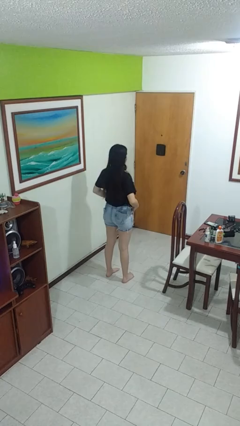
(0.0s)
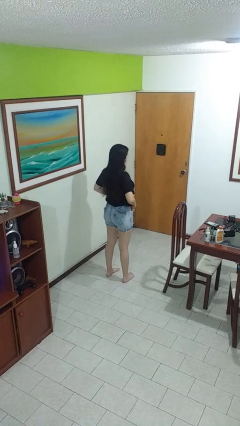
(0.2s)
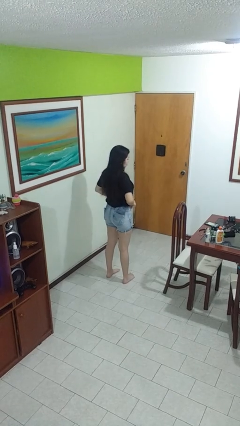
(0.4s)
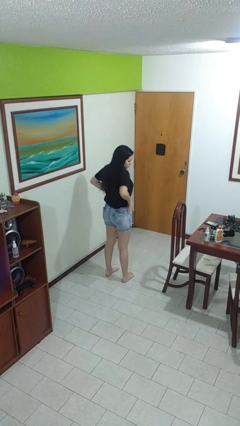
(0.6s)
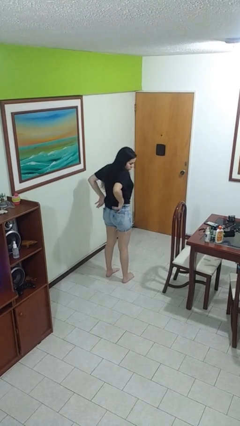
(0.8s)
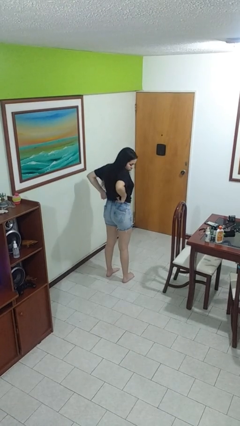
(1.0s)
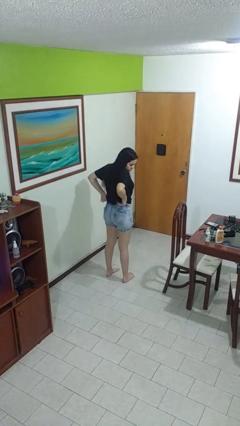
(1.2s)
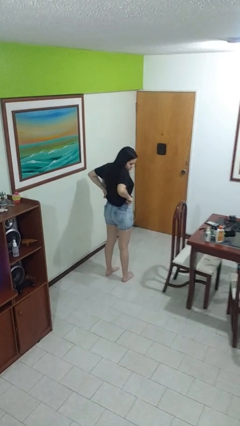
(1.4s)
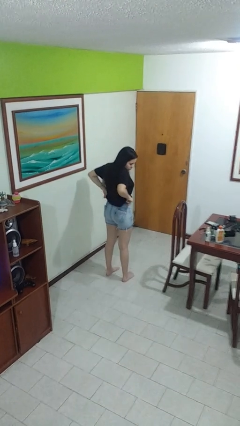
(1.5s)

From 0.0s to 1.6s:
person hikes up pants

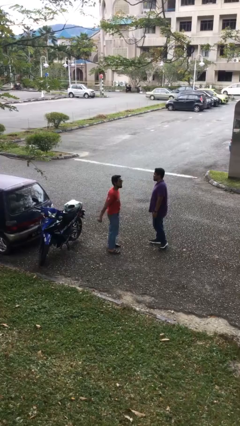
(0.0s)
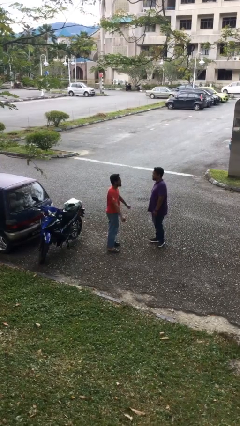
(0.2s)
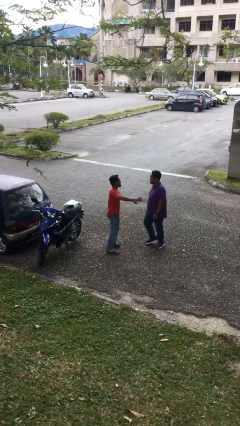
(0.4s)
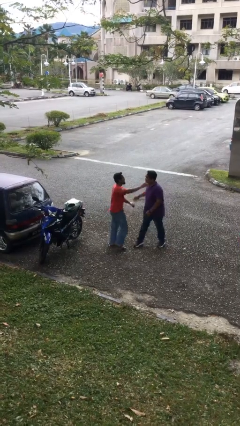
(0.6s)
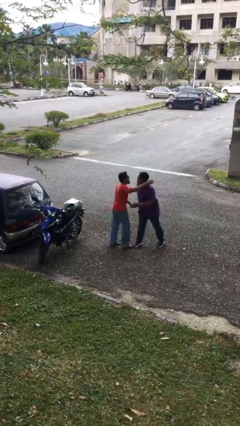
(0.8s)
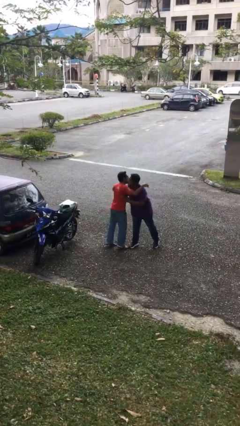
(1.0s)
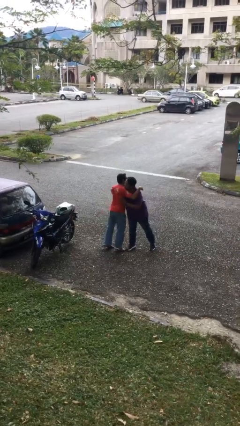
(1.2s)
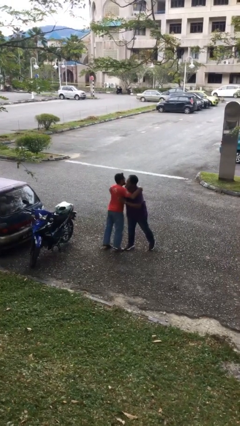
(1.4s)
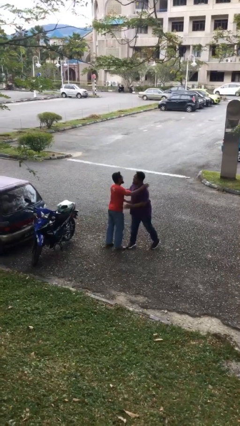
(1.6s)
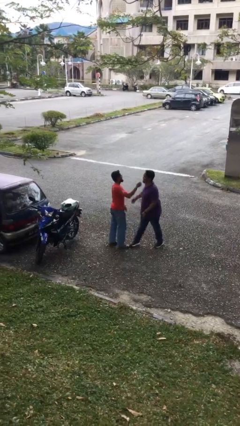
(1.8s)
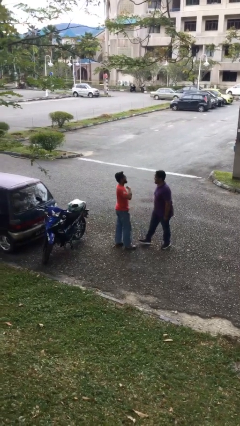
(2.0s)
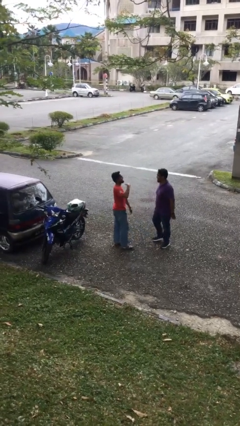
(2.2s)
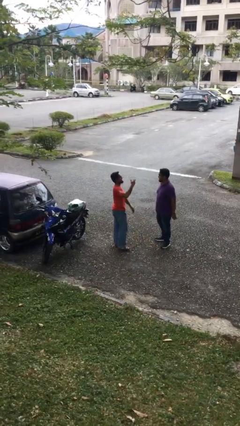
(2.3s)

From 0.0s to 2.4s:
person embraces person

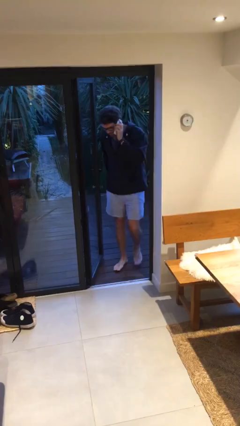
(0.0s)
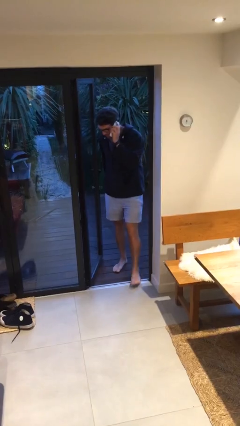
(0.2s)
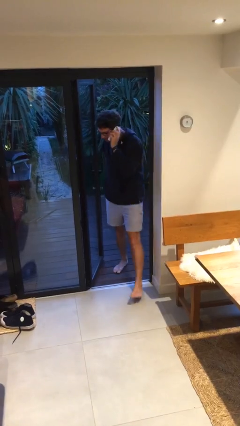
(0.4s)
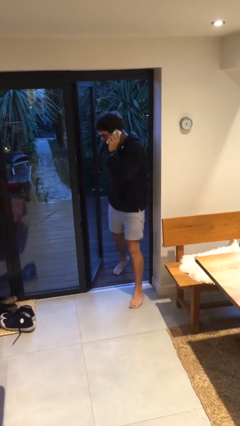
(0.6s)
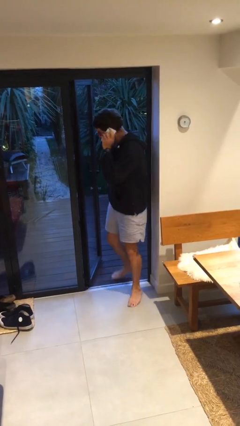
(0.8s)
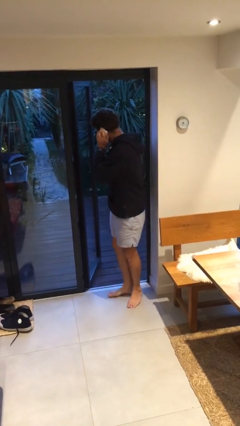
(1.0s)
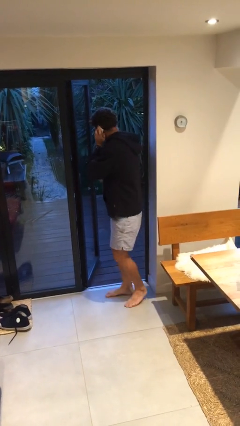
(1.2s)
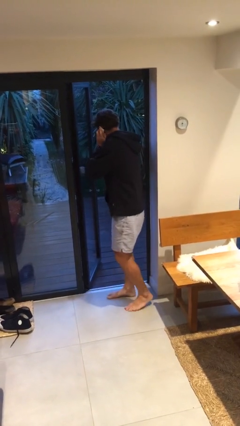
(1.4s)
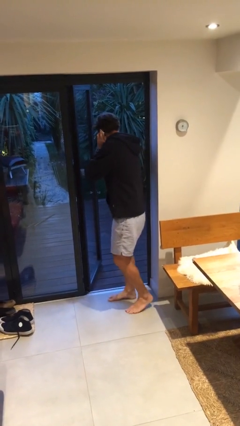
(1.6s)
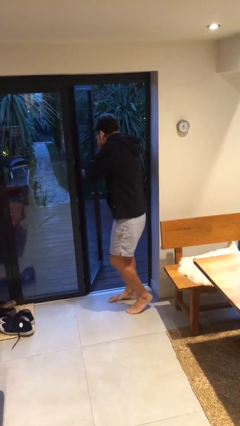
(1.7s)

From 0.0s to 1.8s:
person enters scene through structure

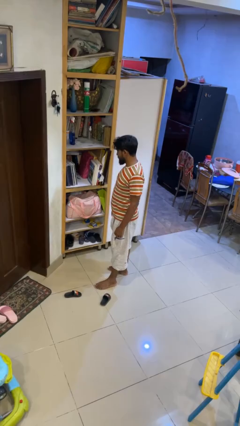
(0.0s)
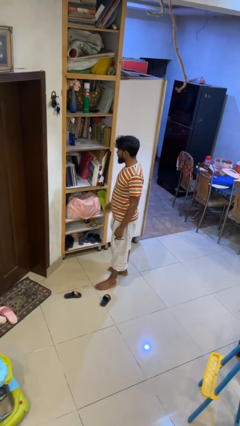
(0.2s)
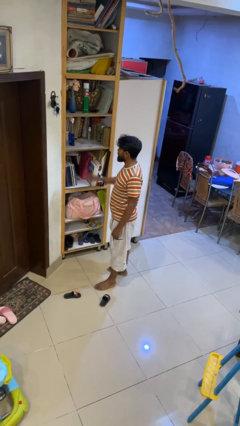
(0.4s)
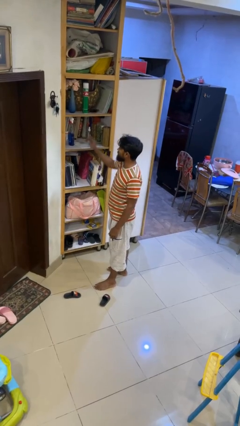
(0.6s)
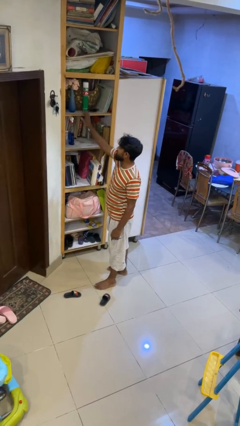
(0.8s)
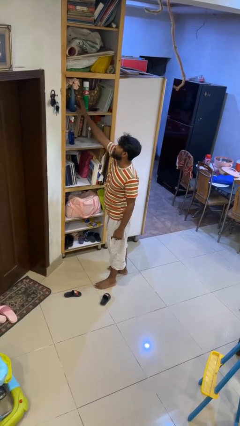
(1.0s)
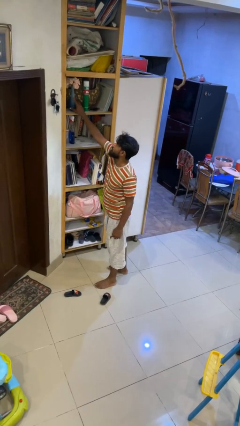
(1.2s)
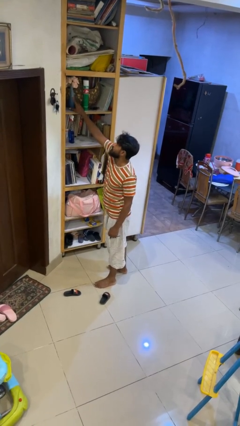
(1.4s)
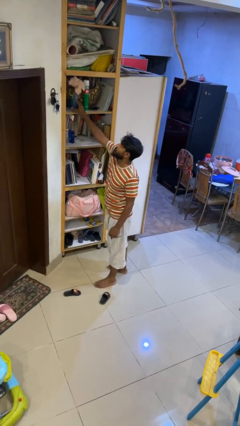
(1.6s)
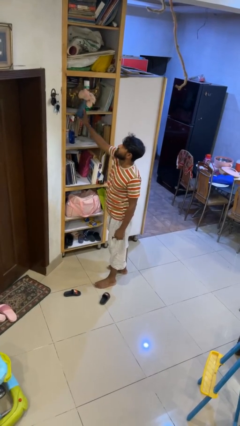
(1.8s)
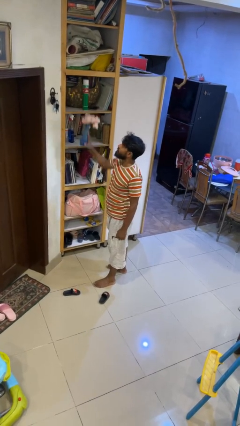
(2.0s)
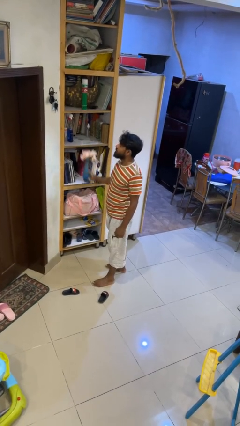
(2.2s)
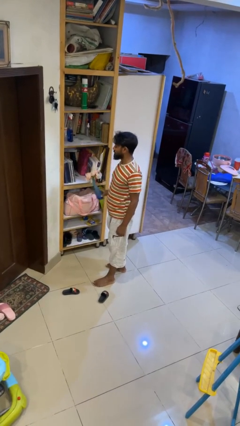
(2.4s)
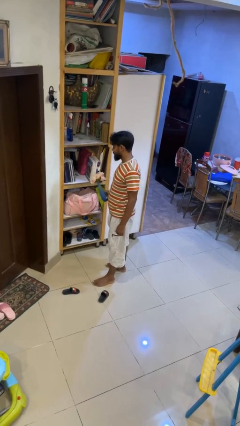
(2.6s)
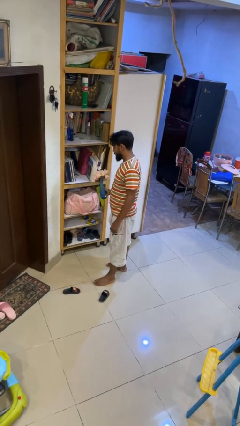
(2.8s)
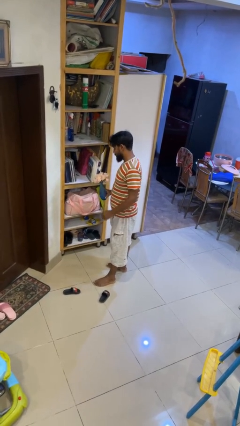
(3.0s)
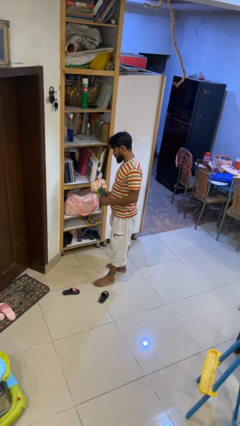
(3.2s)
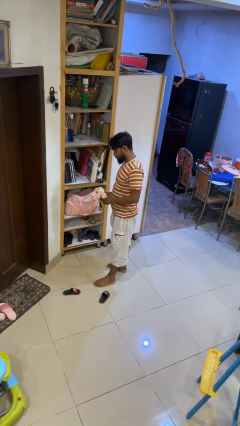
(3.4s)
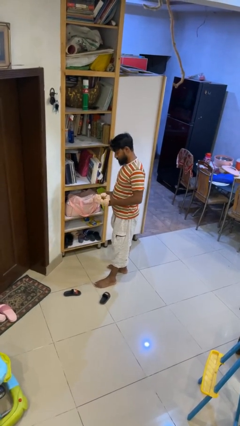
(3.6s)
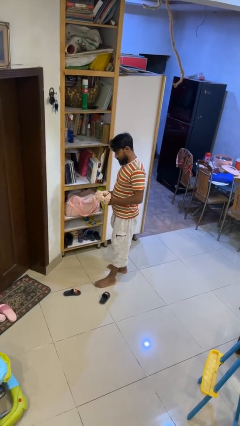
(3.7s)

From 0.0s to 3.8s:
person picks up object from shelf

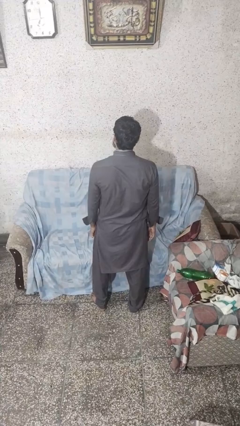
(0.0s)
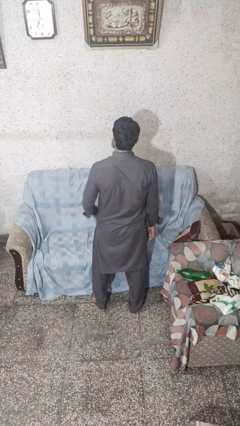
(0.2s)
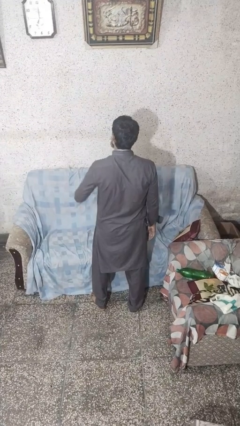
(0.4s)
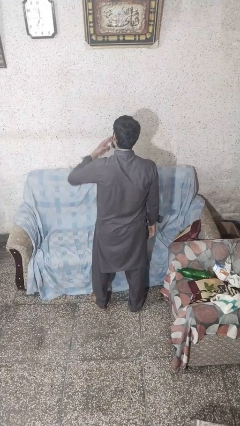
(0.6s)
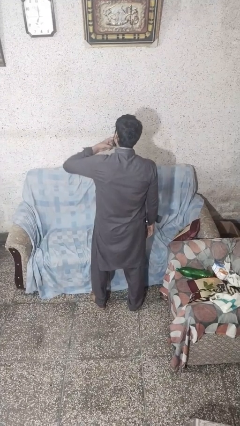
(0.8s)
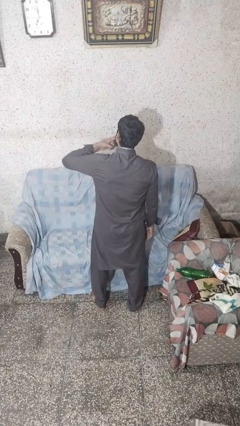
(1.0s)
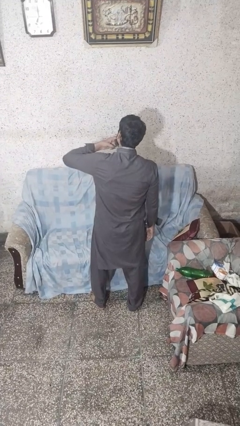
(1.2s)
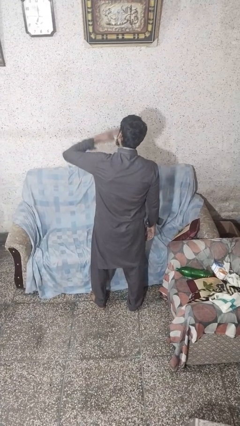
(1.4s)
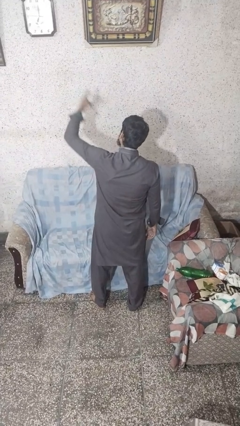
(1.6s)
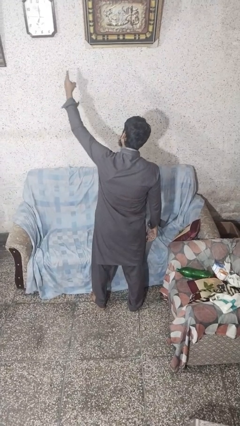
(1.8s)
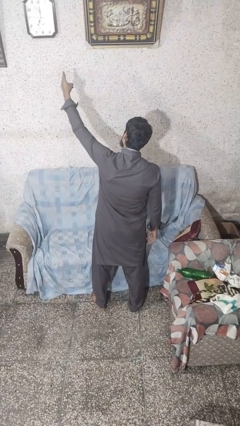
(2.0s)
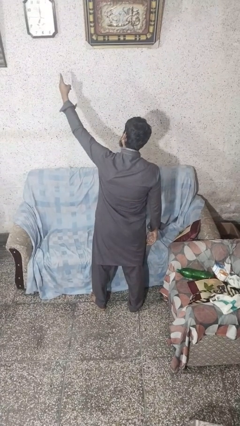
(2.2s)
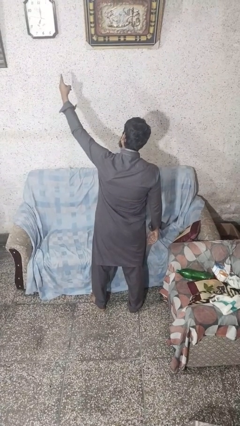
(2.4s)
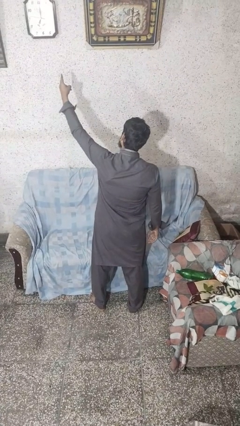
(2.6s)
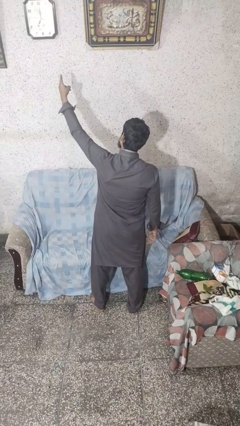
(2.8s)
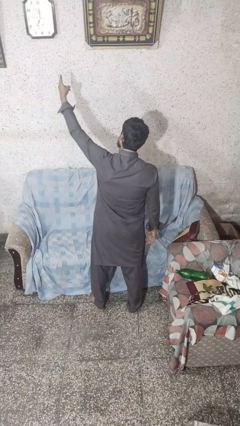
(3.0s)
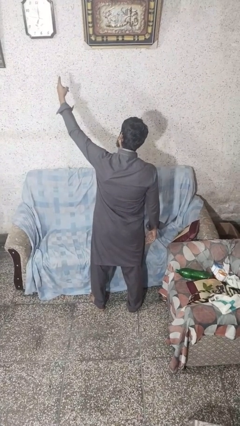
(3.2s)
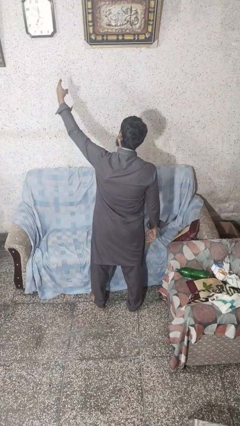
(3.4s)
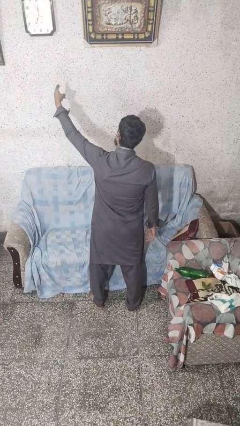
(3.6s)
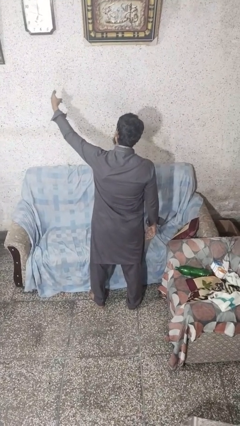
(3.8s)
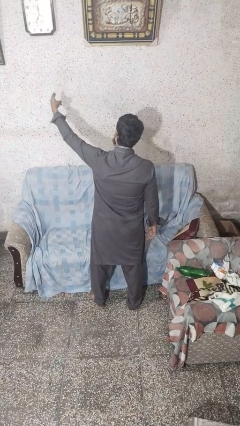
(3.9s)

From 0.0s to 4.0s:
person gestures blow kiss

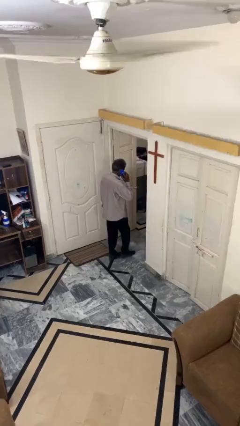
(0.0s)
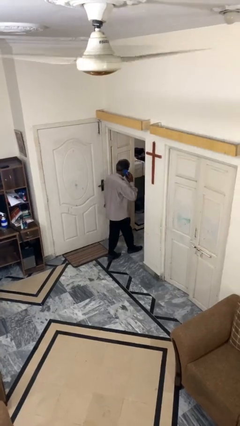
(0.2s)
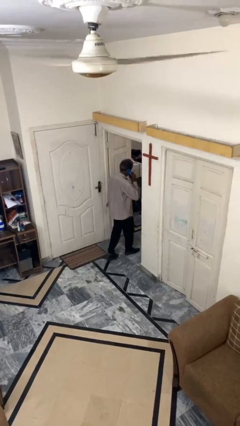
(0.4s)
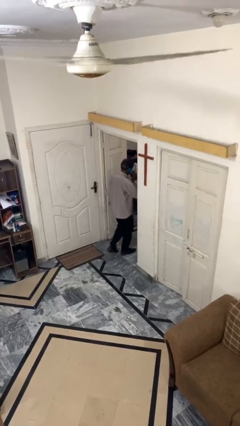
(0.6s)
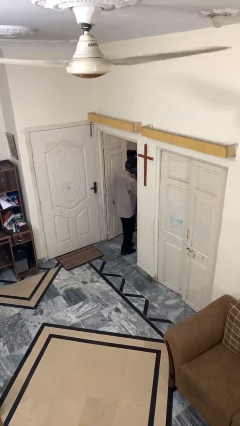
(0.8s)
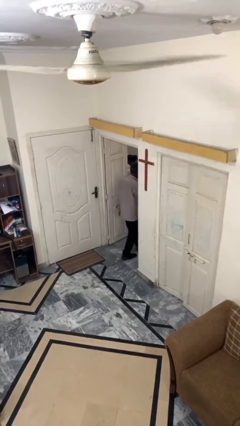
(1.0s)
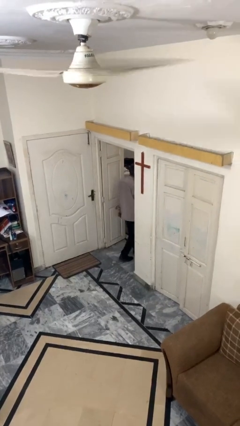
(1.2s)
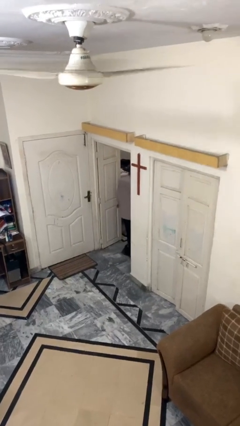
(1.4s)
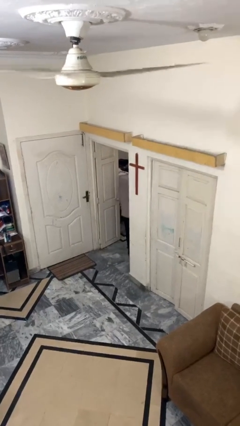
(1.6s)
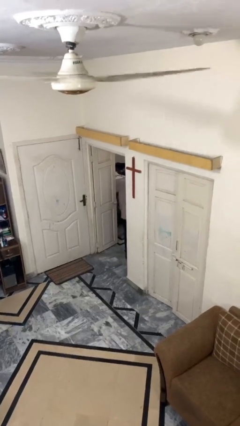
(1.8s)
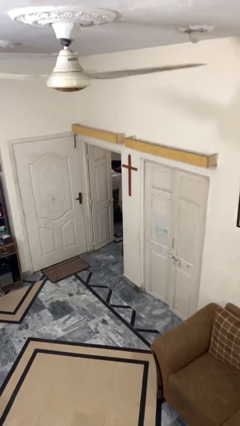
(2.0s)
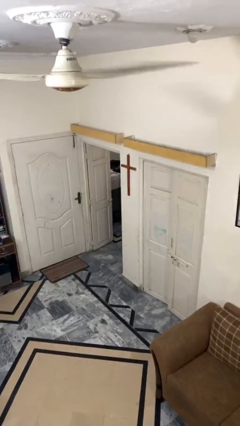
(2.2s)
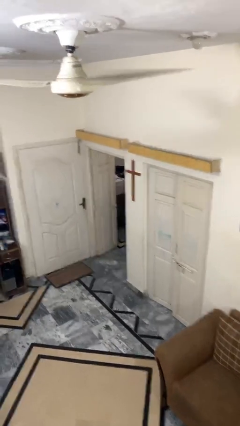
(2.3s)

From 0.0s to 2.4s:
person exits scene through structure

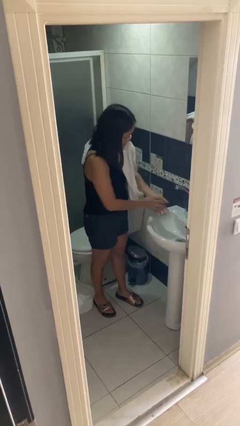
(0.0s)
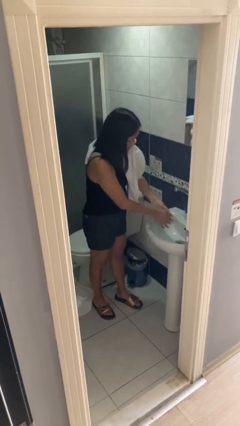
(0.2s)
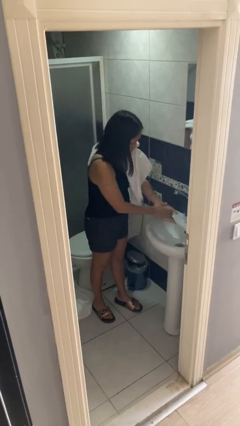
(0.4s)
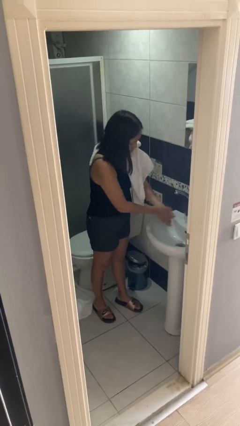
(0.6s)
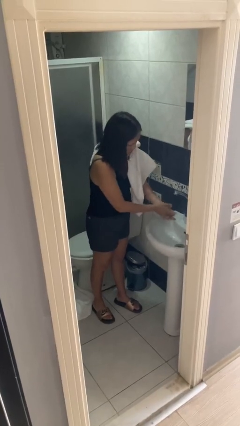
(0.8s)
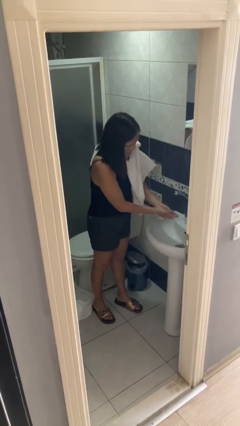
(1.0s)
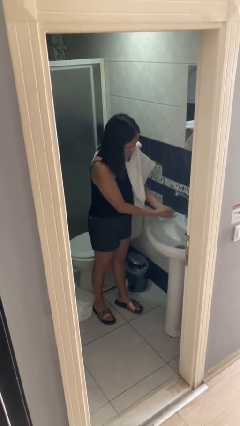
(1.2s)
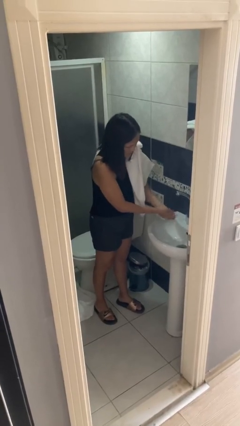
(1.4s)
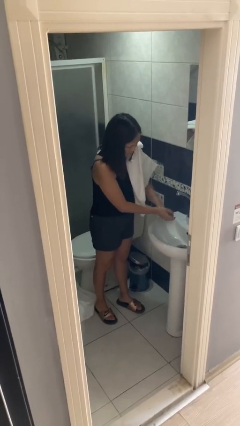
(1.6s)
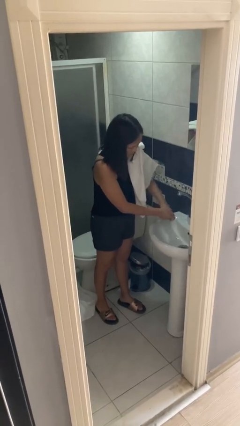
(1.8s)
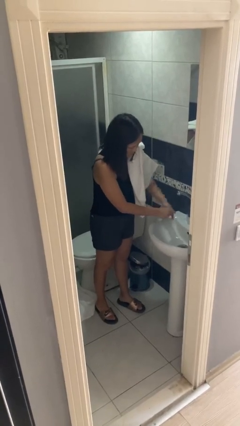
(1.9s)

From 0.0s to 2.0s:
person washes hands
